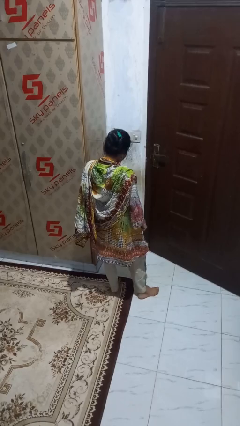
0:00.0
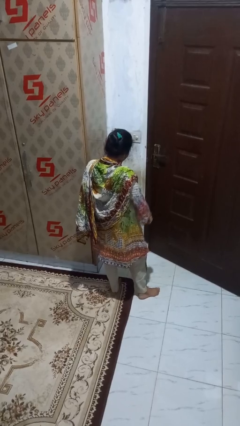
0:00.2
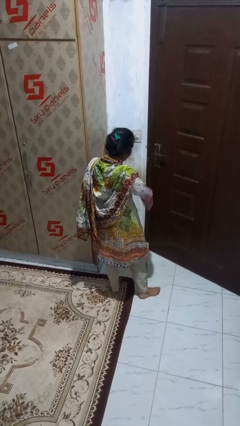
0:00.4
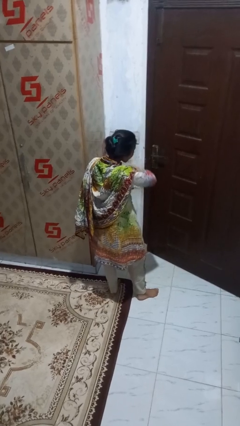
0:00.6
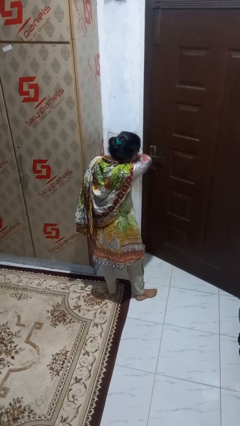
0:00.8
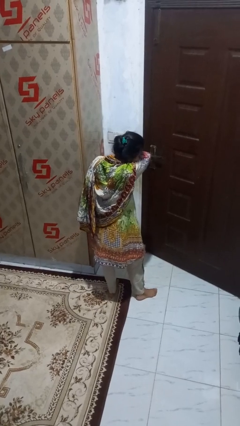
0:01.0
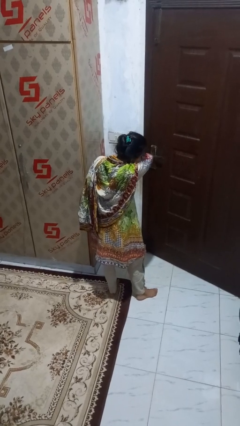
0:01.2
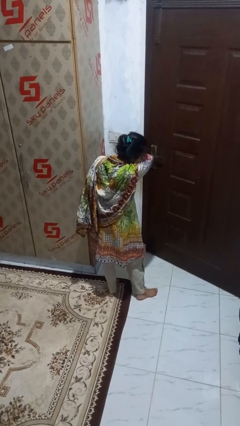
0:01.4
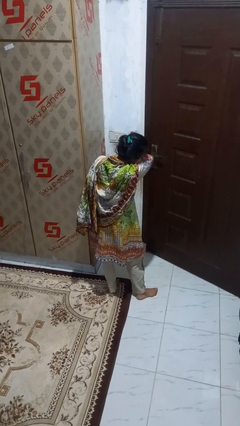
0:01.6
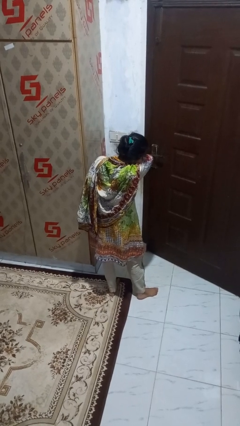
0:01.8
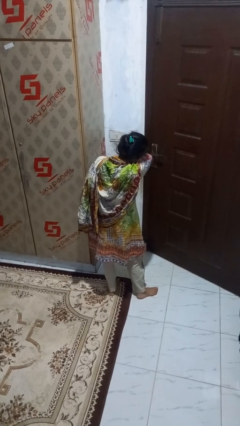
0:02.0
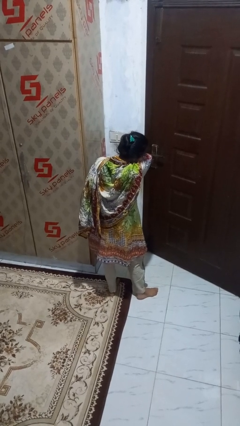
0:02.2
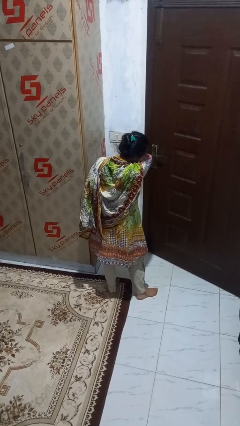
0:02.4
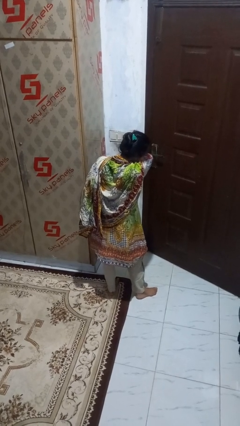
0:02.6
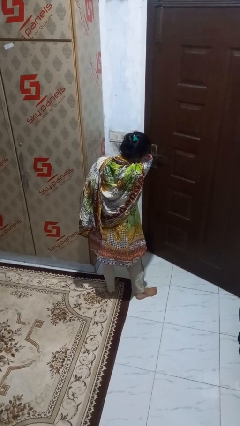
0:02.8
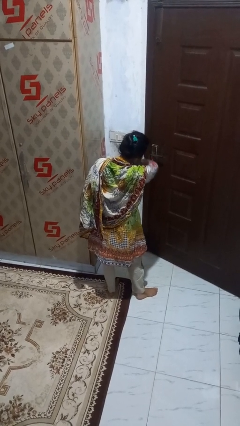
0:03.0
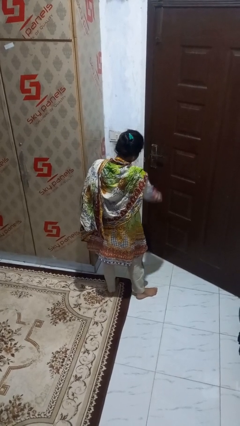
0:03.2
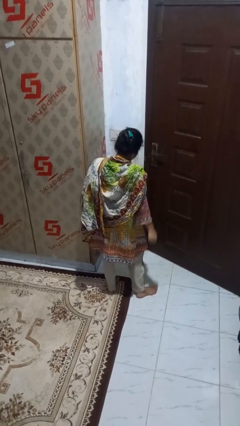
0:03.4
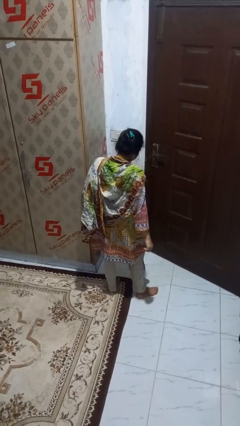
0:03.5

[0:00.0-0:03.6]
person sneezes into arm

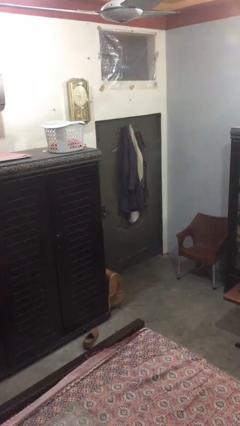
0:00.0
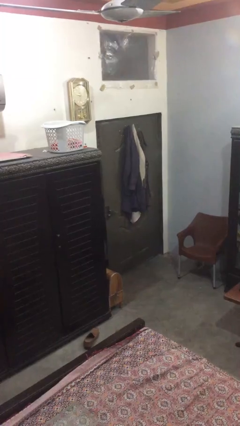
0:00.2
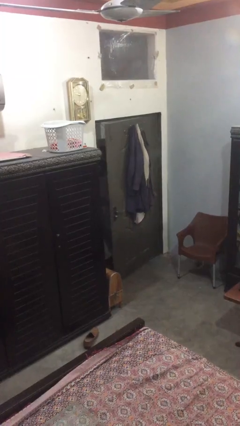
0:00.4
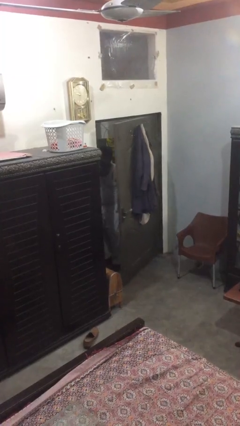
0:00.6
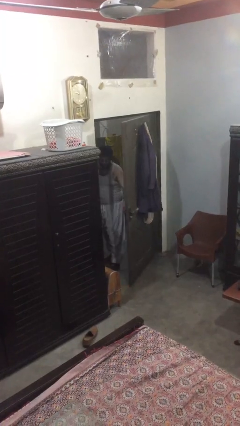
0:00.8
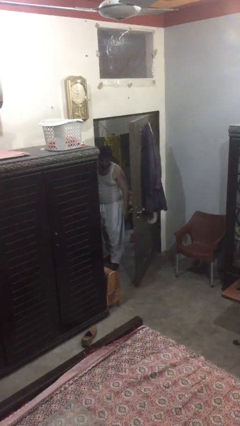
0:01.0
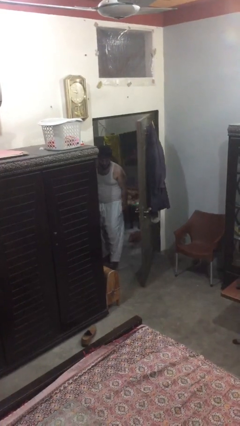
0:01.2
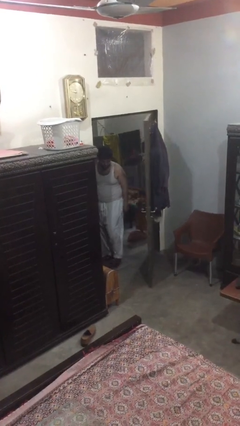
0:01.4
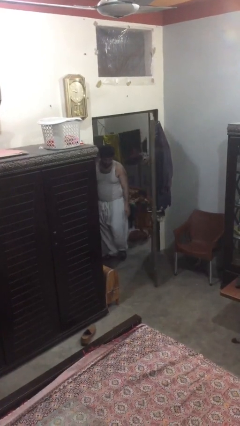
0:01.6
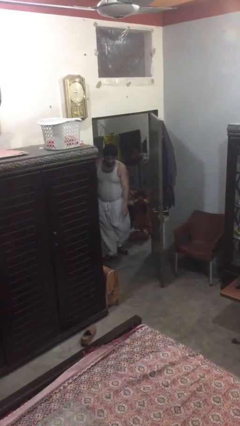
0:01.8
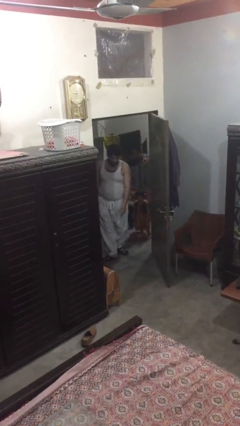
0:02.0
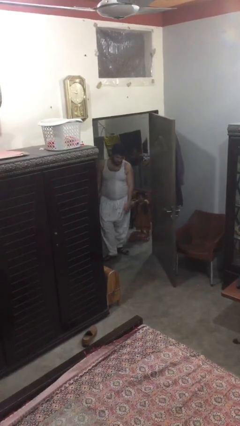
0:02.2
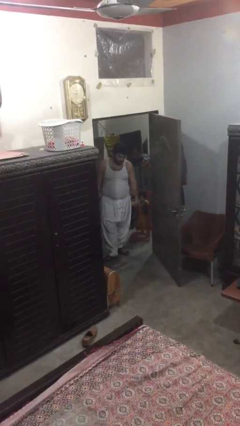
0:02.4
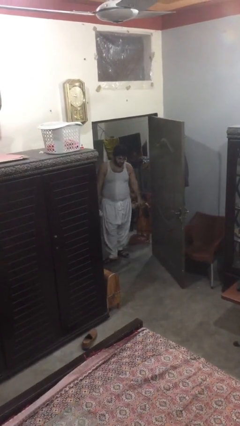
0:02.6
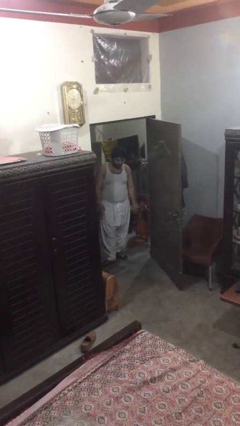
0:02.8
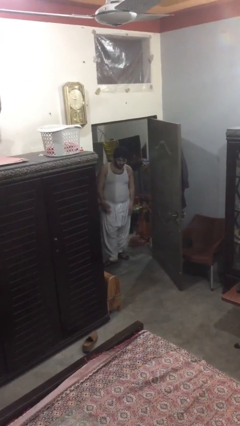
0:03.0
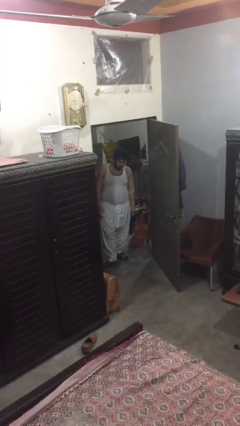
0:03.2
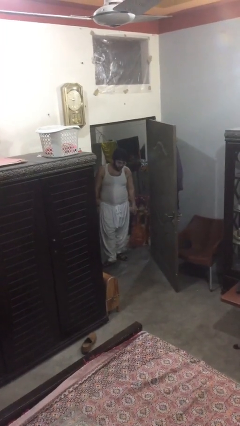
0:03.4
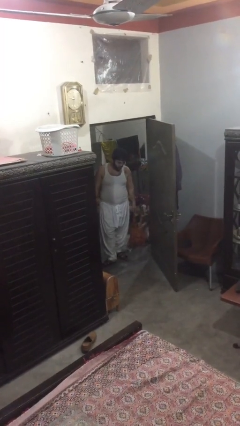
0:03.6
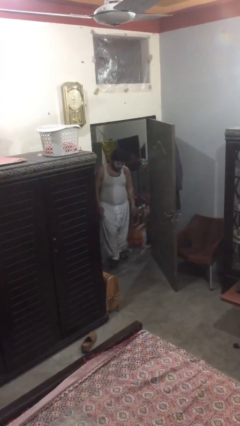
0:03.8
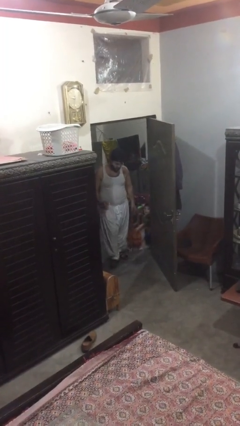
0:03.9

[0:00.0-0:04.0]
person opens facility door

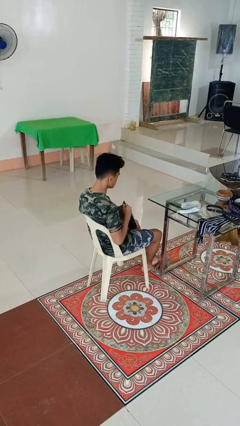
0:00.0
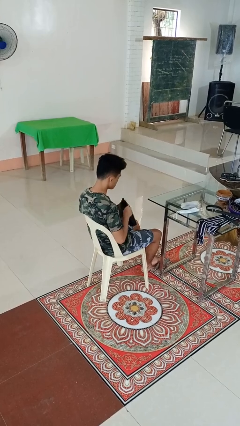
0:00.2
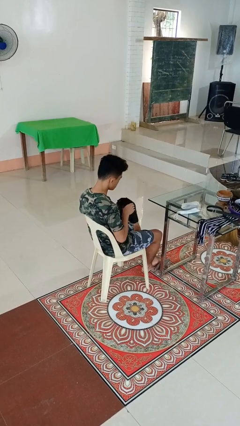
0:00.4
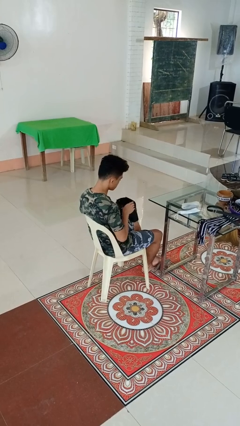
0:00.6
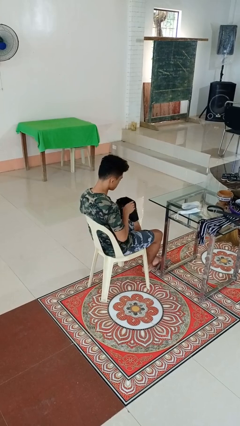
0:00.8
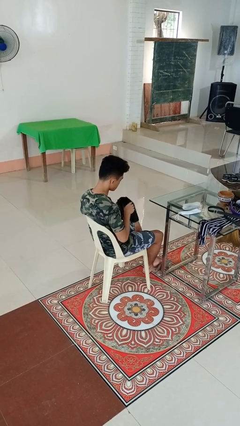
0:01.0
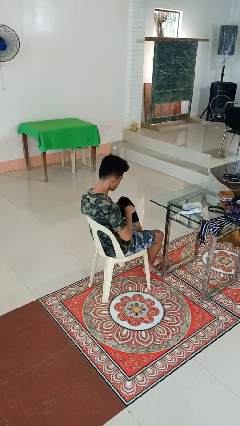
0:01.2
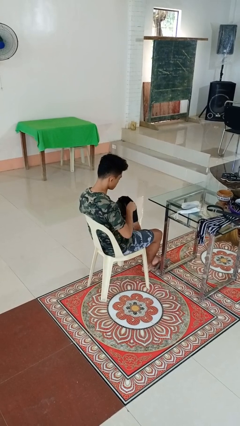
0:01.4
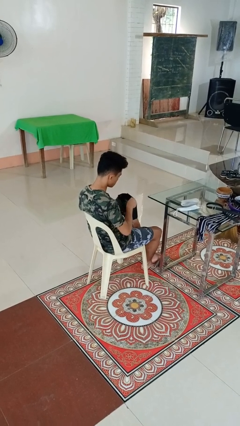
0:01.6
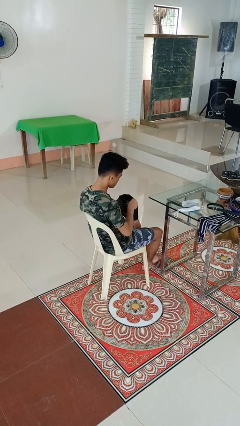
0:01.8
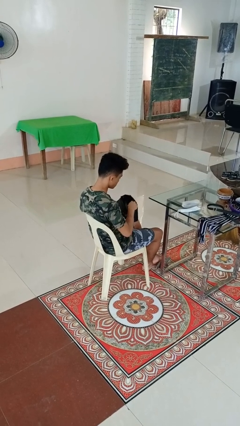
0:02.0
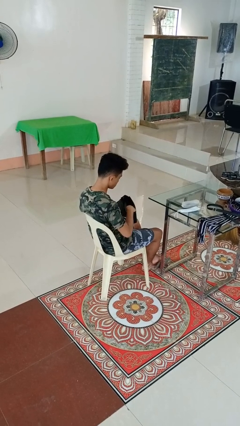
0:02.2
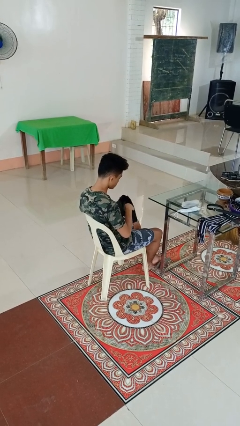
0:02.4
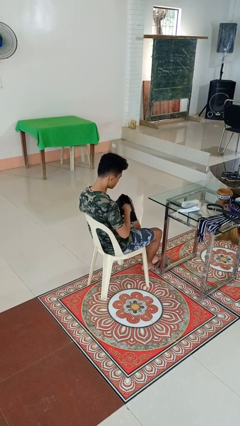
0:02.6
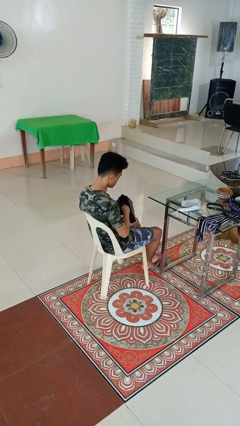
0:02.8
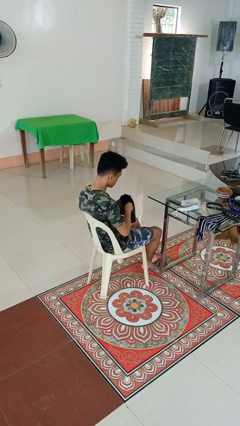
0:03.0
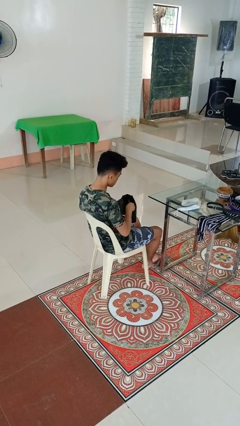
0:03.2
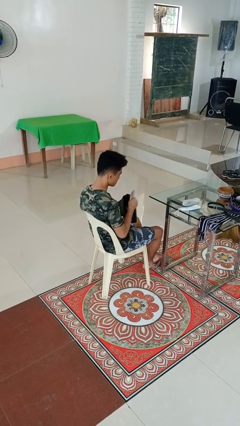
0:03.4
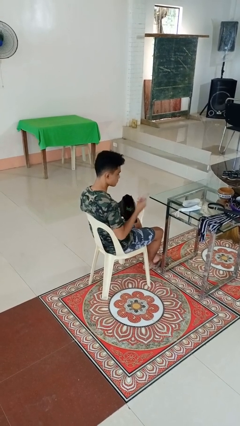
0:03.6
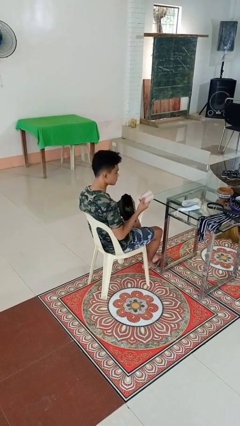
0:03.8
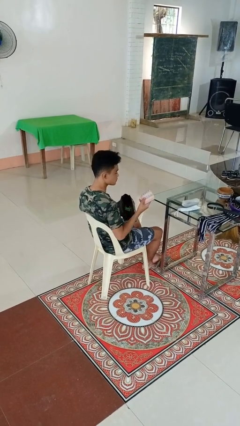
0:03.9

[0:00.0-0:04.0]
person searches in purse

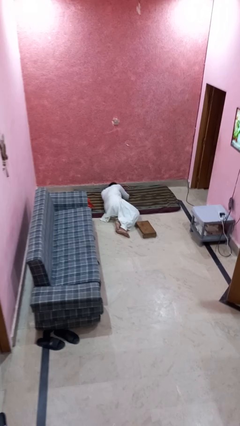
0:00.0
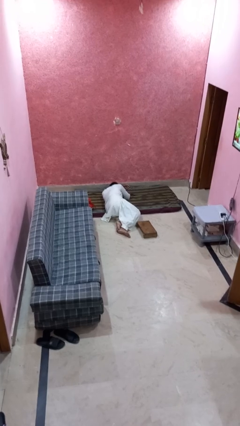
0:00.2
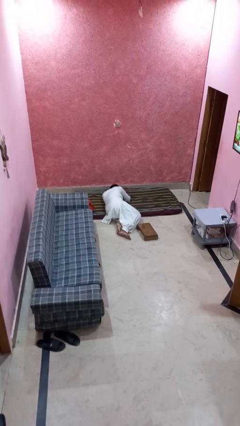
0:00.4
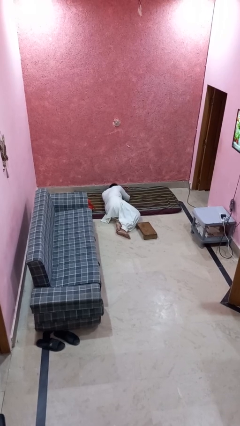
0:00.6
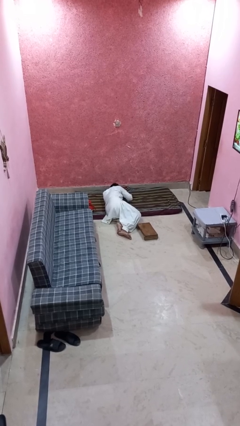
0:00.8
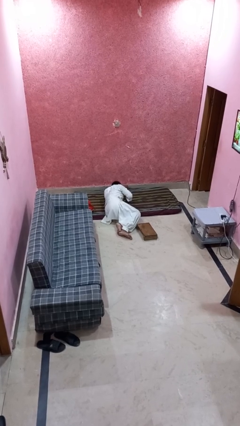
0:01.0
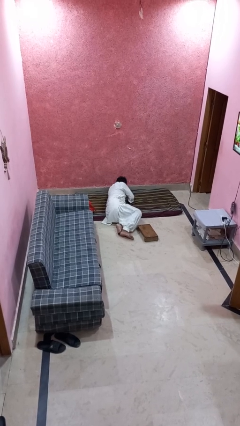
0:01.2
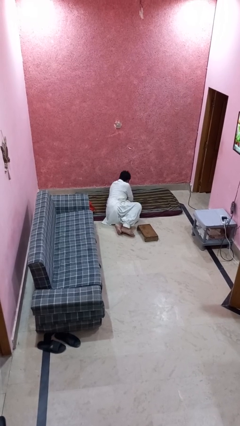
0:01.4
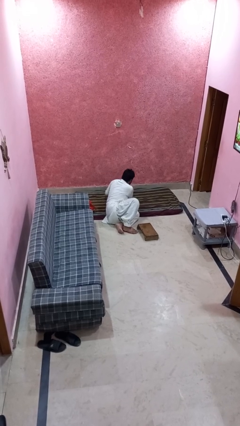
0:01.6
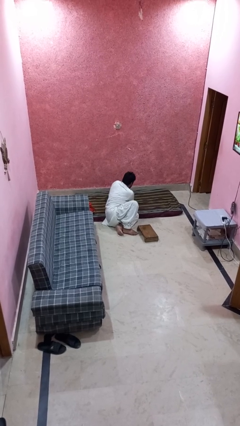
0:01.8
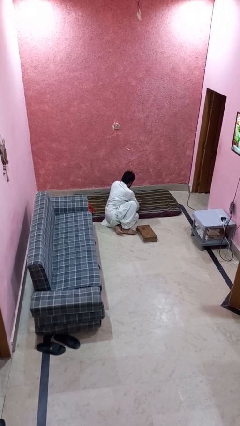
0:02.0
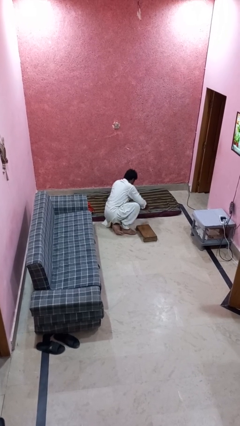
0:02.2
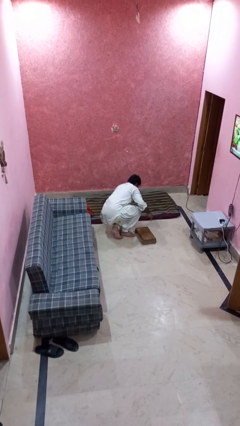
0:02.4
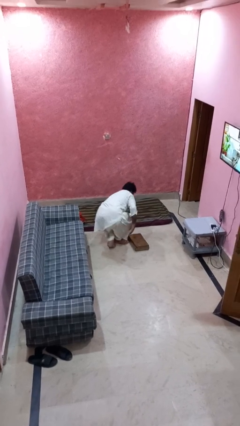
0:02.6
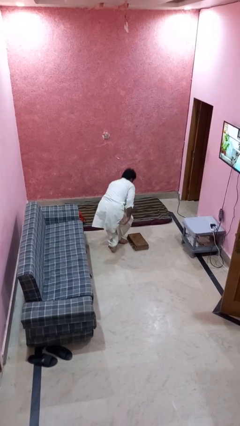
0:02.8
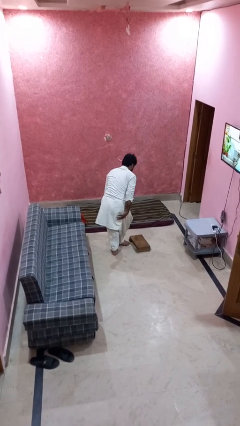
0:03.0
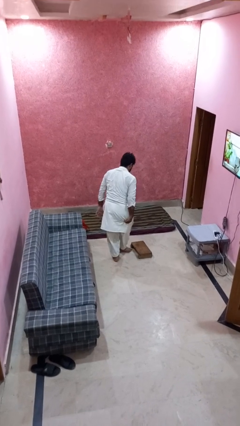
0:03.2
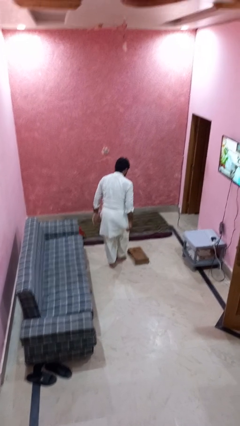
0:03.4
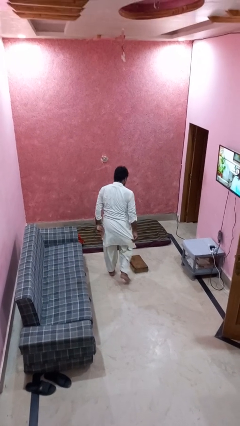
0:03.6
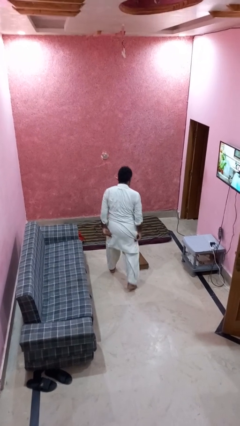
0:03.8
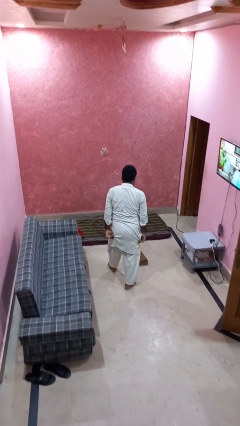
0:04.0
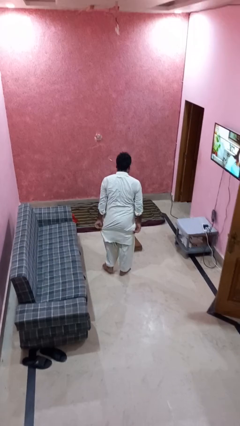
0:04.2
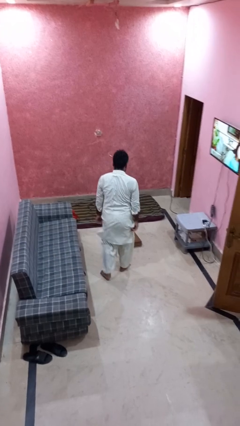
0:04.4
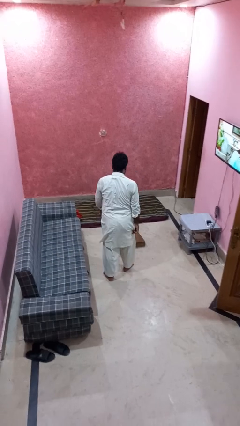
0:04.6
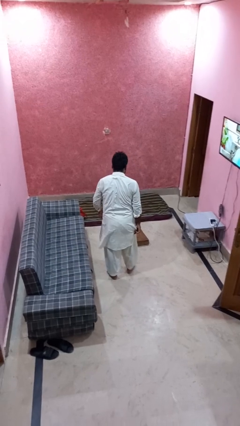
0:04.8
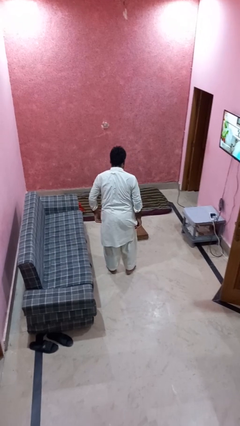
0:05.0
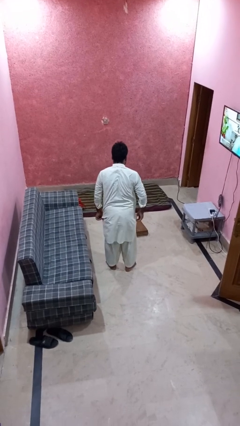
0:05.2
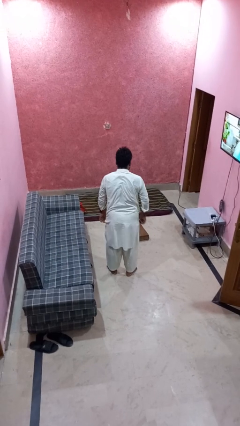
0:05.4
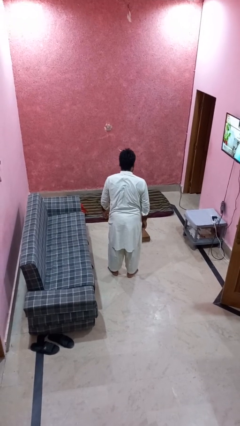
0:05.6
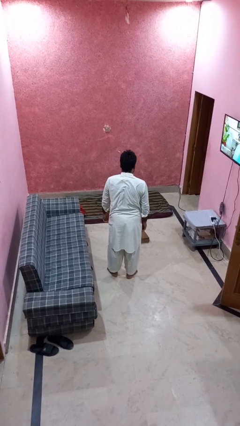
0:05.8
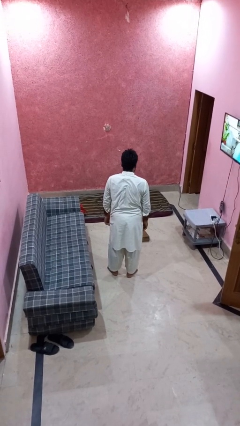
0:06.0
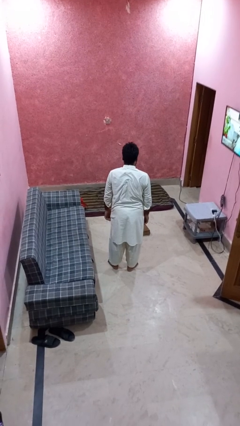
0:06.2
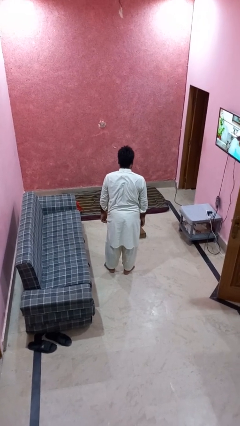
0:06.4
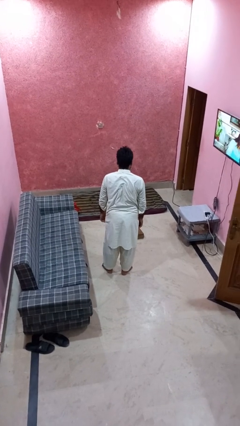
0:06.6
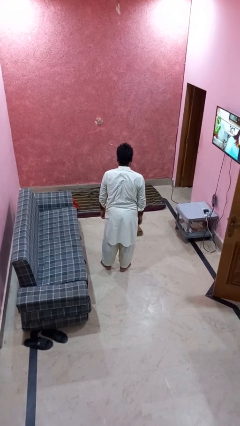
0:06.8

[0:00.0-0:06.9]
person stands up from floor
